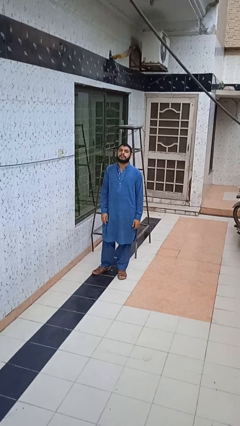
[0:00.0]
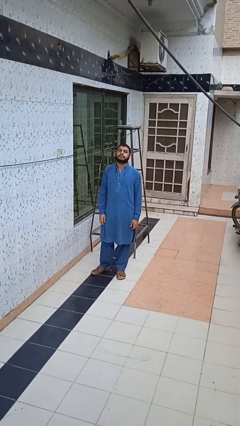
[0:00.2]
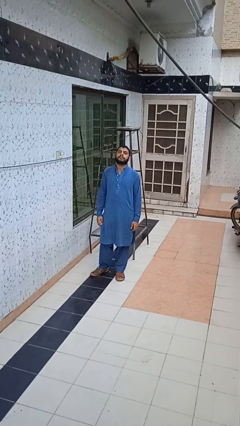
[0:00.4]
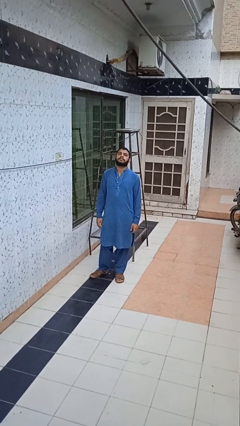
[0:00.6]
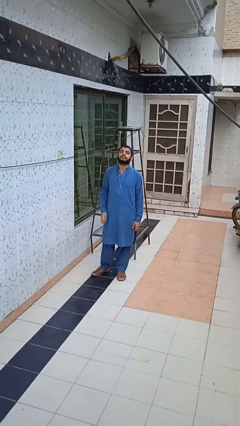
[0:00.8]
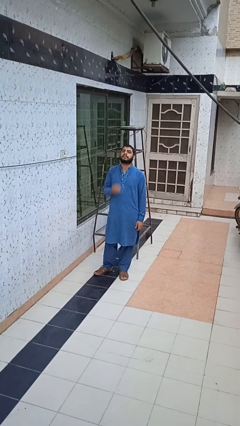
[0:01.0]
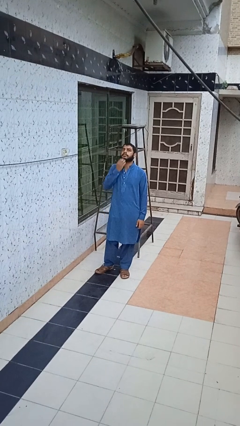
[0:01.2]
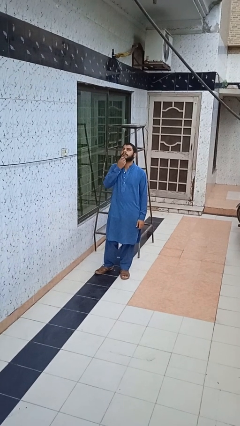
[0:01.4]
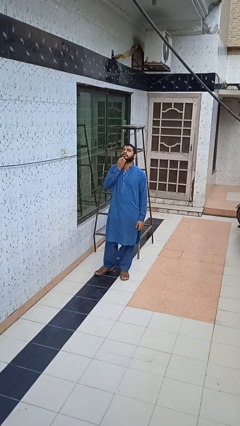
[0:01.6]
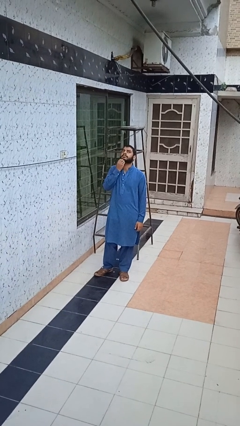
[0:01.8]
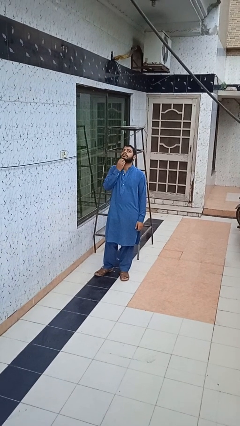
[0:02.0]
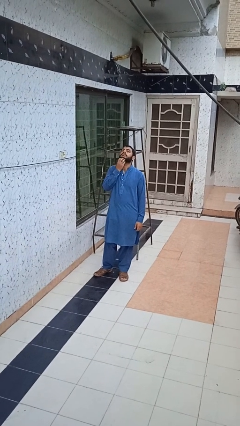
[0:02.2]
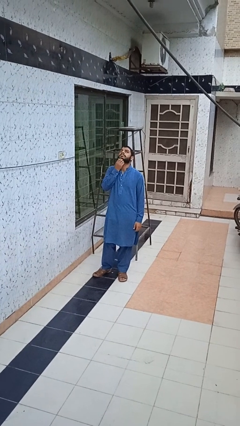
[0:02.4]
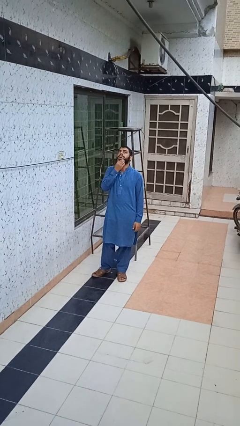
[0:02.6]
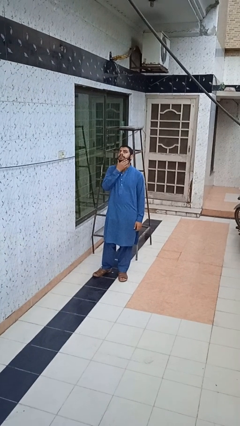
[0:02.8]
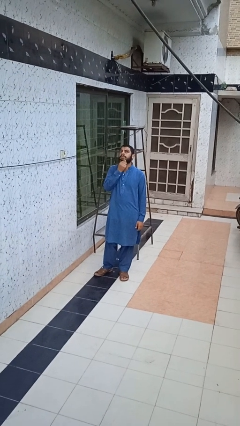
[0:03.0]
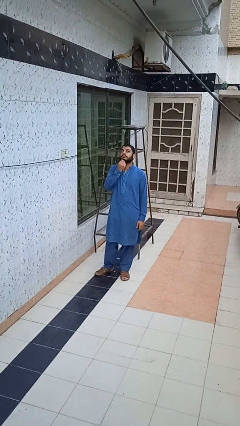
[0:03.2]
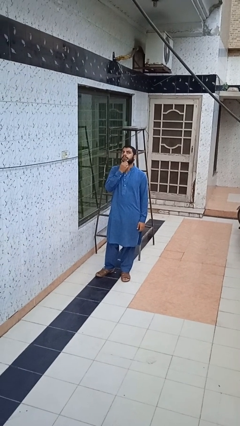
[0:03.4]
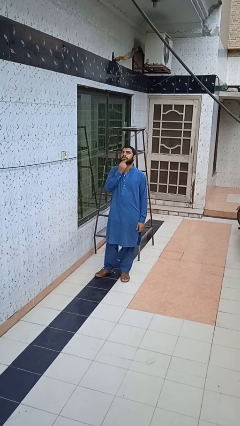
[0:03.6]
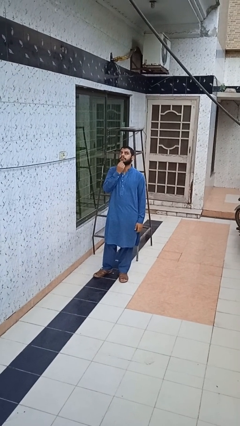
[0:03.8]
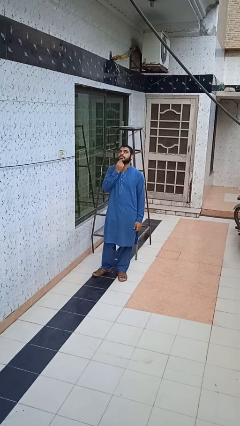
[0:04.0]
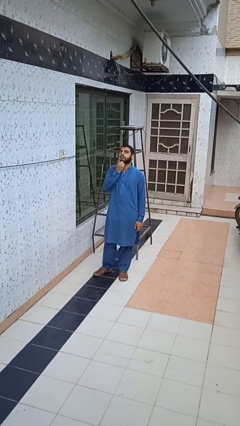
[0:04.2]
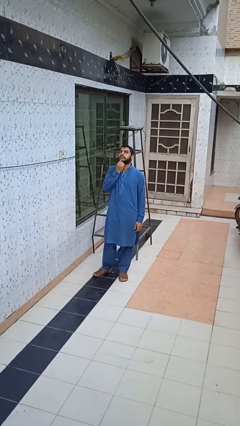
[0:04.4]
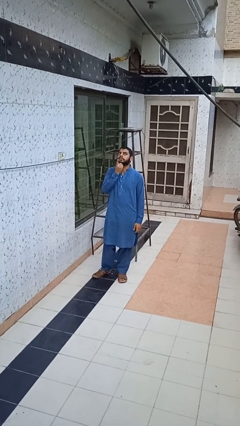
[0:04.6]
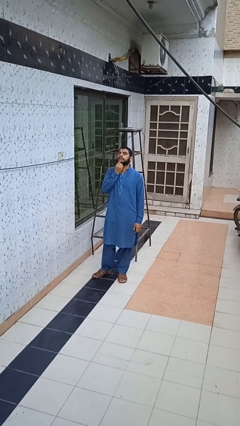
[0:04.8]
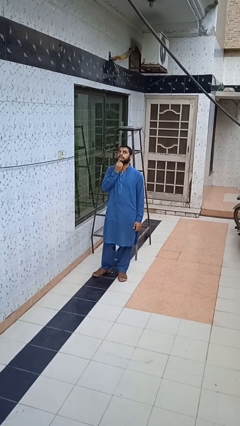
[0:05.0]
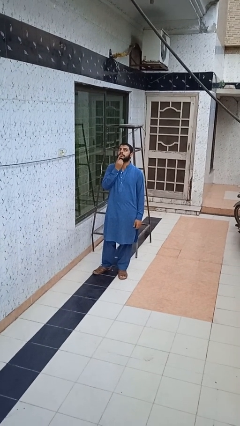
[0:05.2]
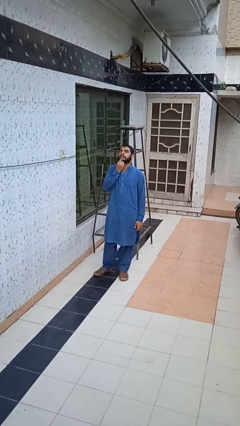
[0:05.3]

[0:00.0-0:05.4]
person strokes chin

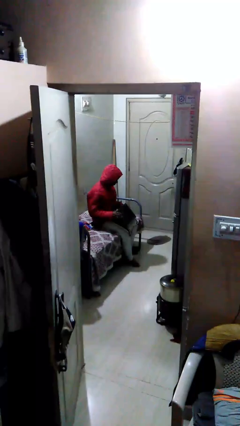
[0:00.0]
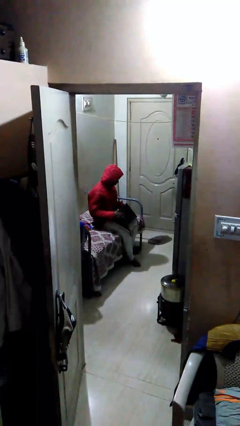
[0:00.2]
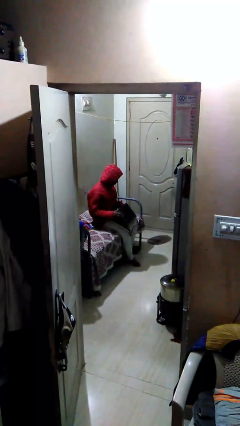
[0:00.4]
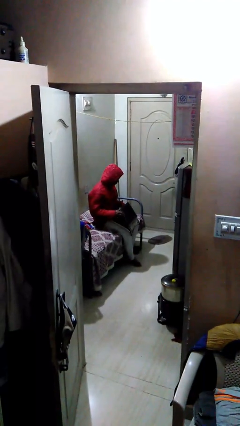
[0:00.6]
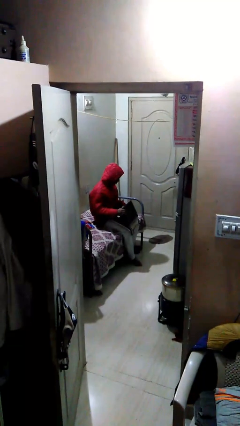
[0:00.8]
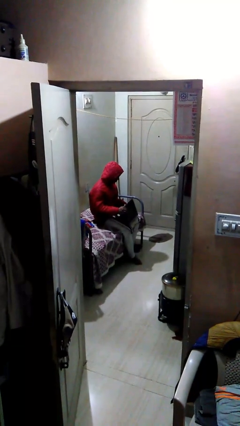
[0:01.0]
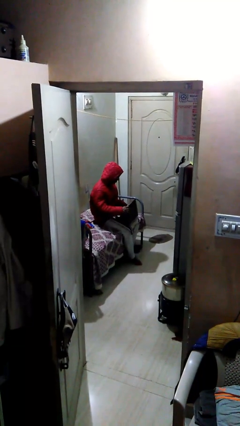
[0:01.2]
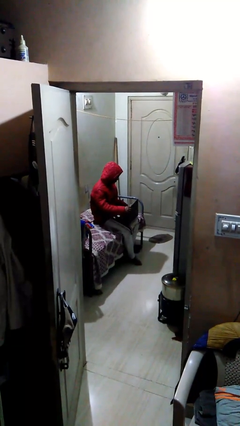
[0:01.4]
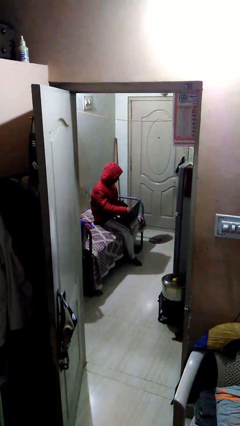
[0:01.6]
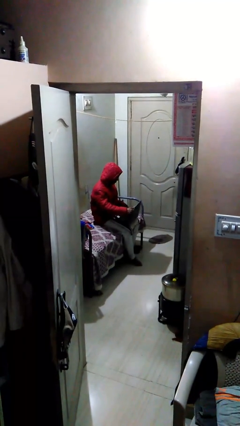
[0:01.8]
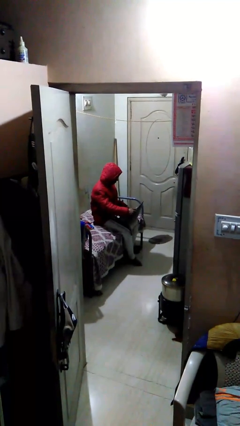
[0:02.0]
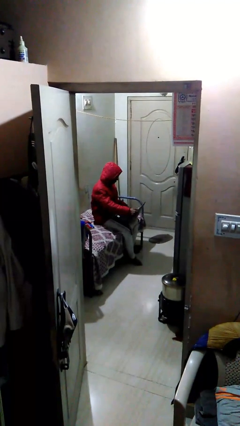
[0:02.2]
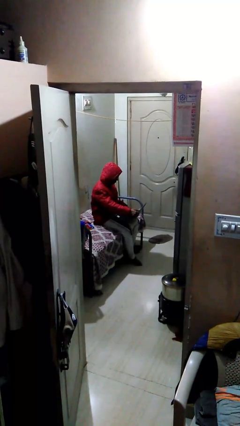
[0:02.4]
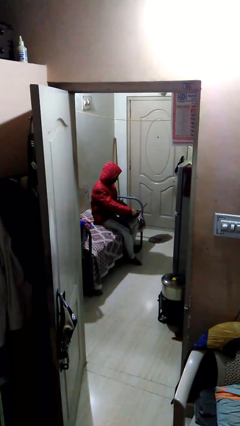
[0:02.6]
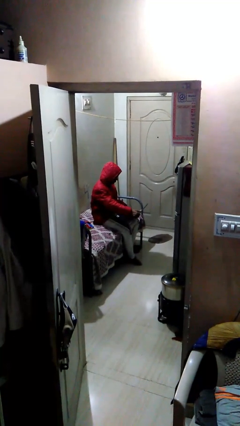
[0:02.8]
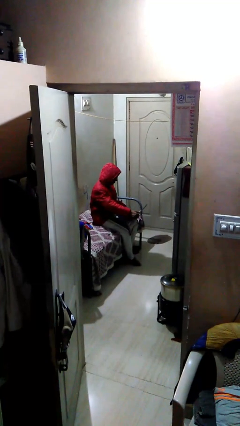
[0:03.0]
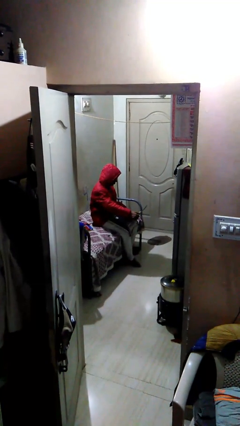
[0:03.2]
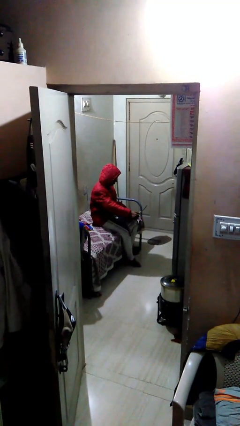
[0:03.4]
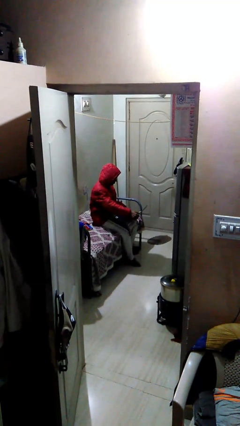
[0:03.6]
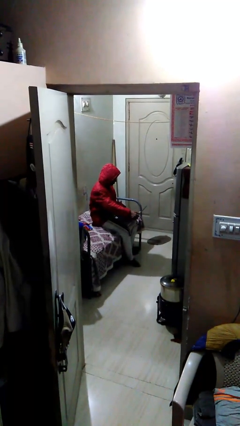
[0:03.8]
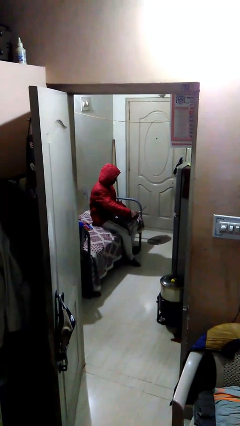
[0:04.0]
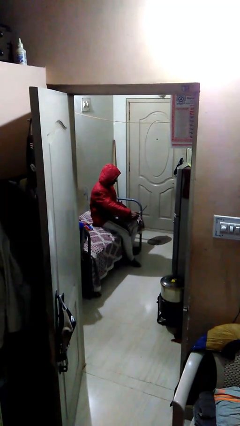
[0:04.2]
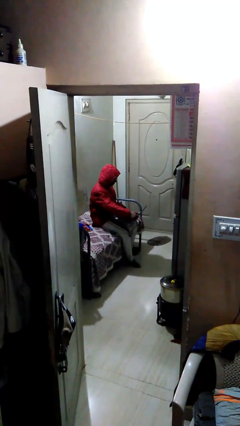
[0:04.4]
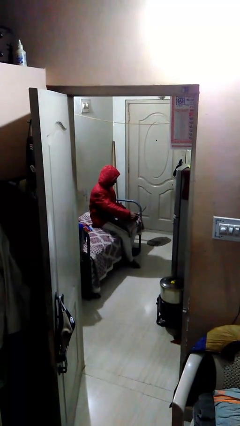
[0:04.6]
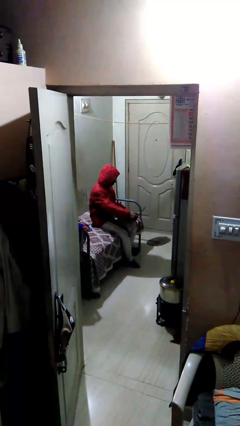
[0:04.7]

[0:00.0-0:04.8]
person interacts with laptop

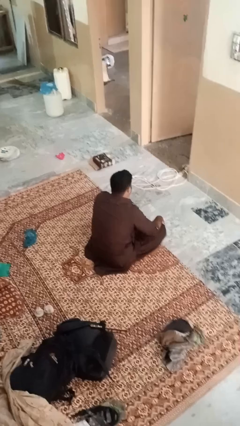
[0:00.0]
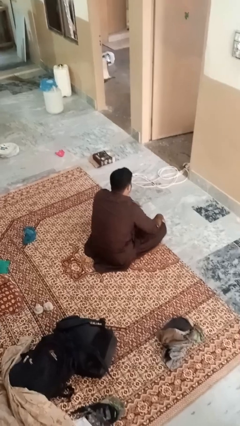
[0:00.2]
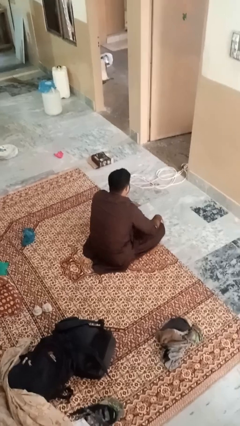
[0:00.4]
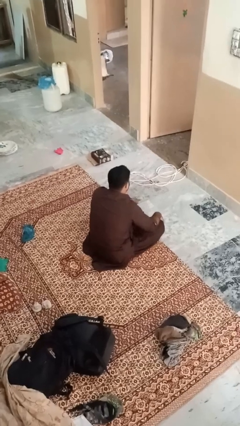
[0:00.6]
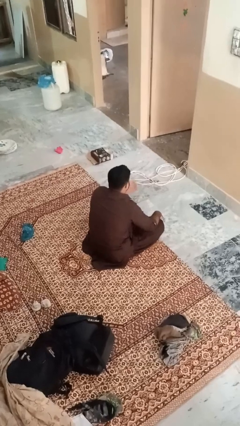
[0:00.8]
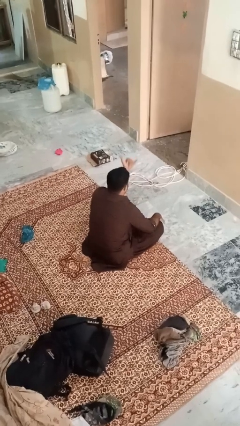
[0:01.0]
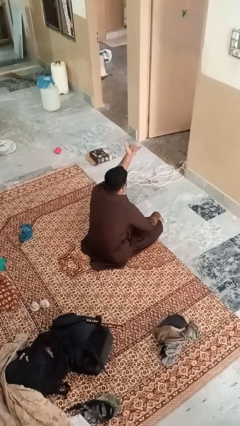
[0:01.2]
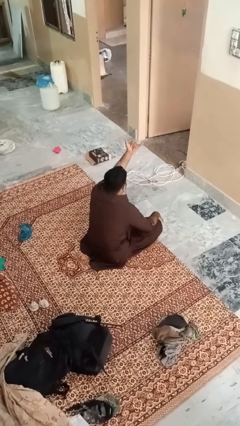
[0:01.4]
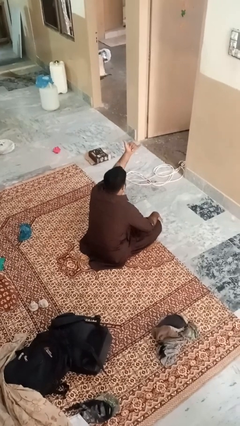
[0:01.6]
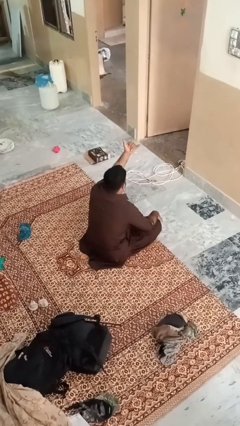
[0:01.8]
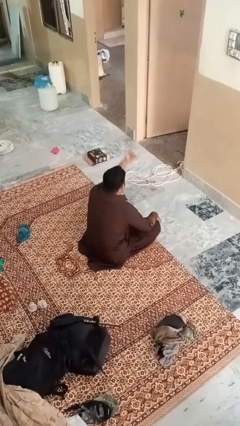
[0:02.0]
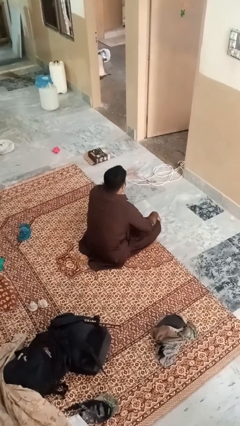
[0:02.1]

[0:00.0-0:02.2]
person gestures hang loose

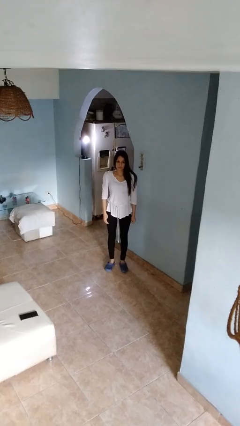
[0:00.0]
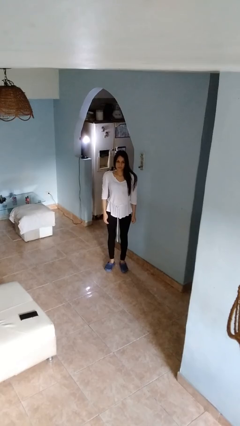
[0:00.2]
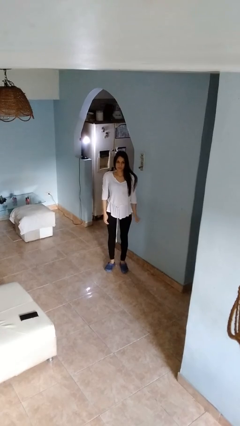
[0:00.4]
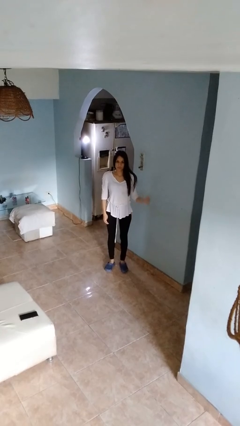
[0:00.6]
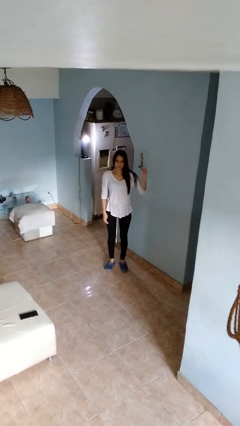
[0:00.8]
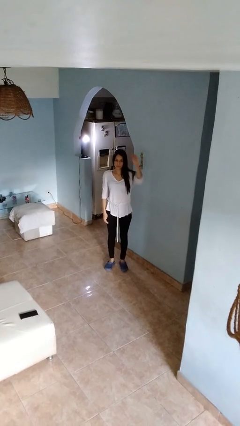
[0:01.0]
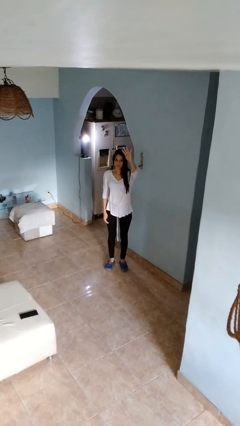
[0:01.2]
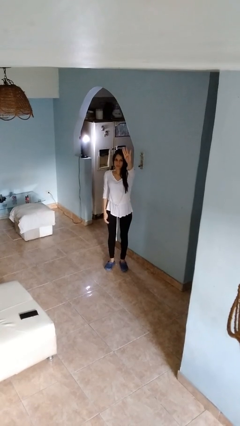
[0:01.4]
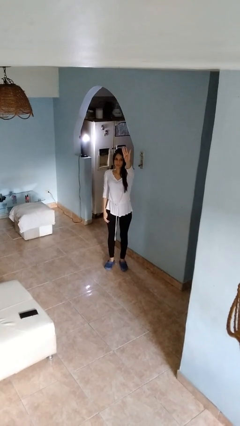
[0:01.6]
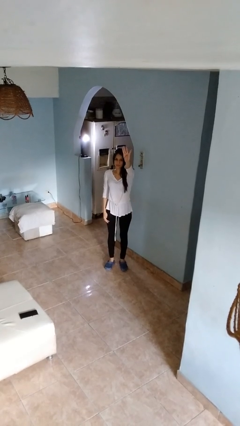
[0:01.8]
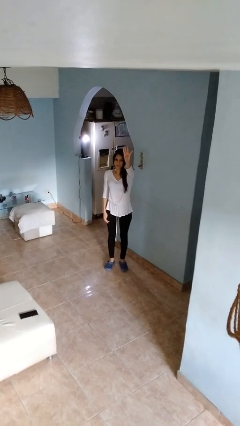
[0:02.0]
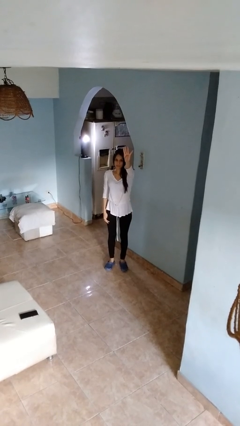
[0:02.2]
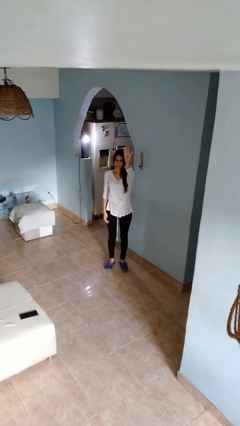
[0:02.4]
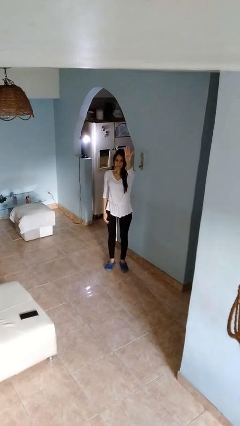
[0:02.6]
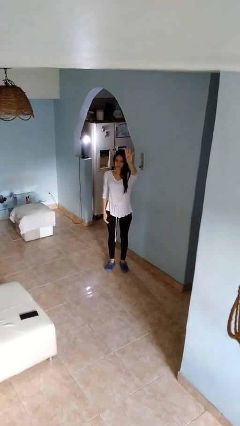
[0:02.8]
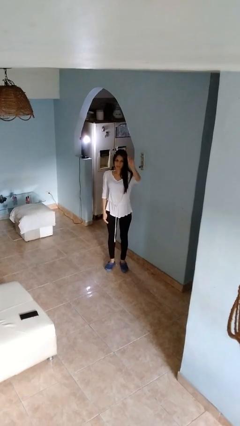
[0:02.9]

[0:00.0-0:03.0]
person gestures number four

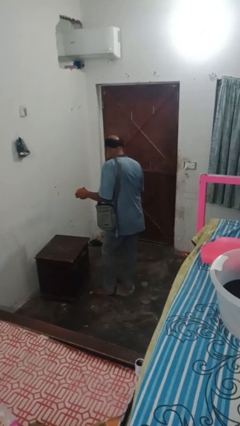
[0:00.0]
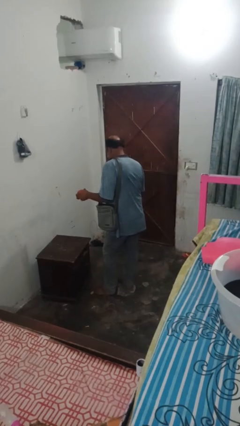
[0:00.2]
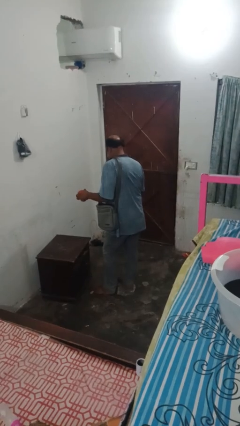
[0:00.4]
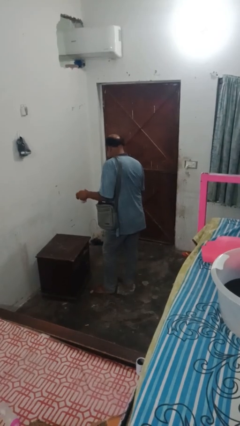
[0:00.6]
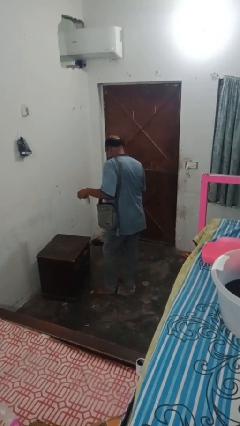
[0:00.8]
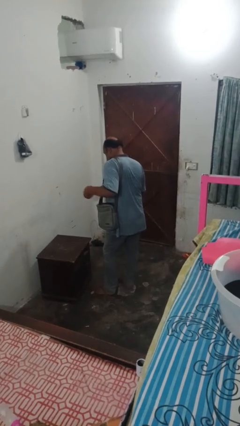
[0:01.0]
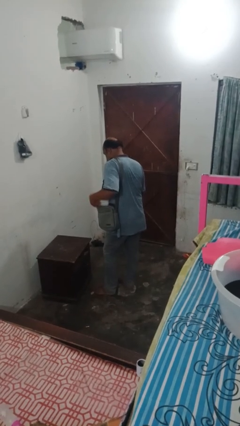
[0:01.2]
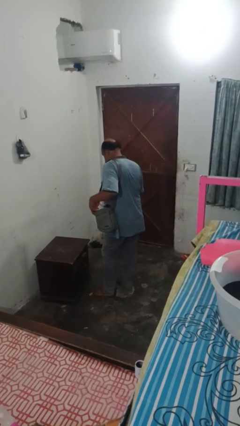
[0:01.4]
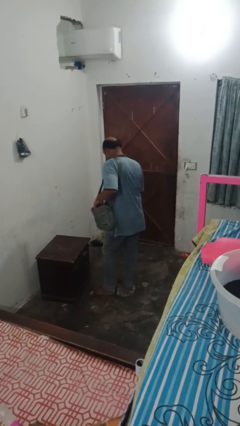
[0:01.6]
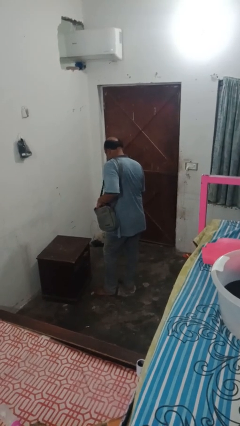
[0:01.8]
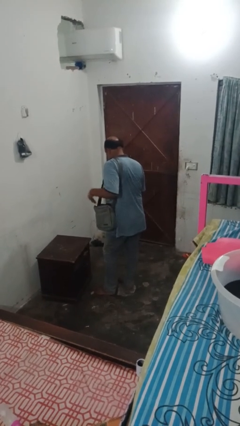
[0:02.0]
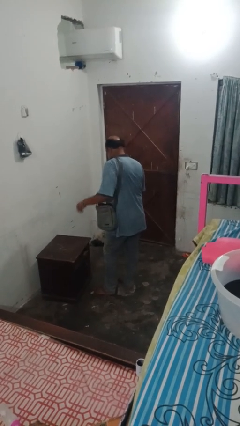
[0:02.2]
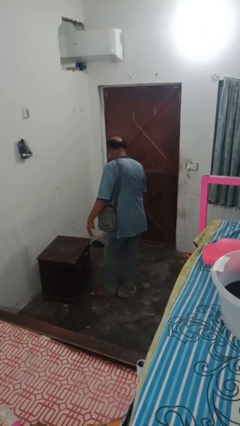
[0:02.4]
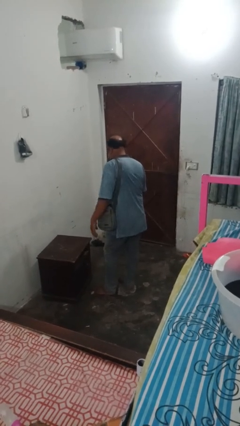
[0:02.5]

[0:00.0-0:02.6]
person puts object into bag
